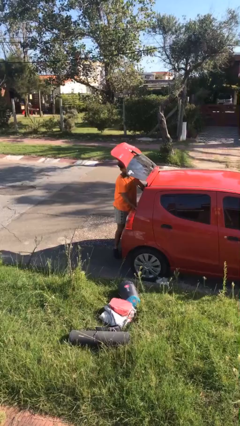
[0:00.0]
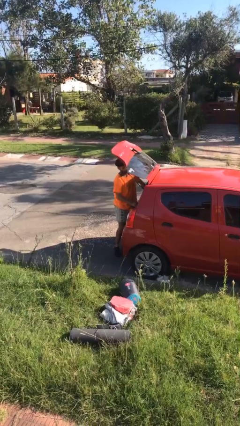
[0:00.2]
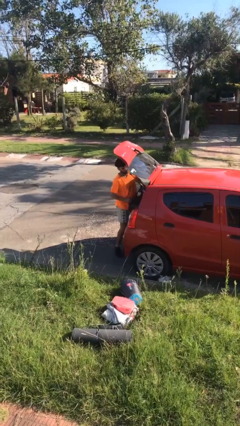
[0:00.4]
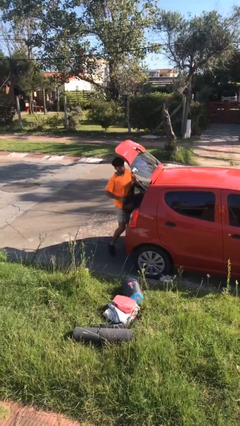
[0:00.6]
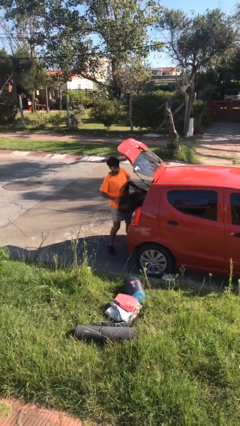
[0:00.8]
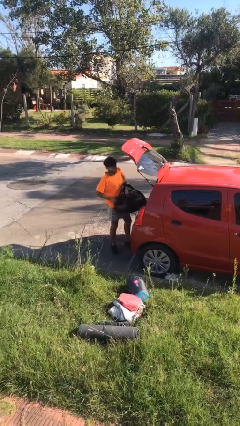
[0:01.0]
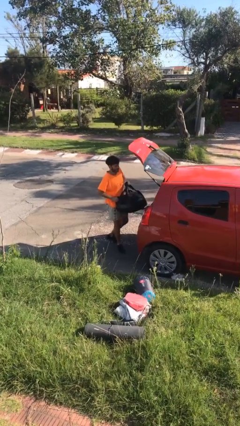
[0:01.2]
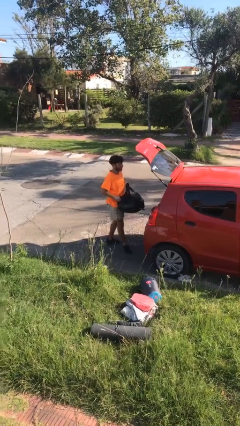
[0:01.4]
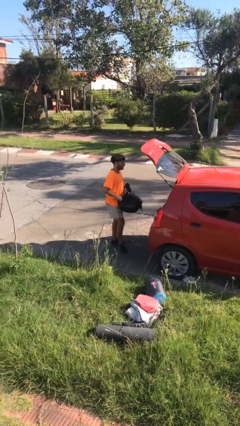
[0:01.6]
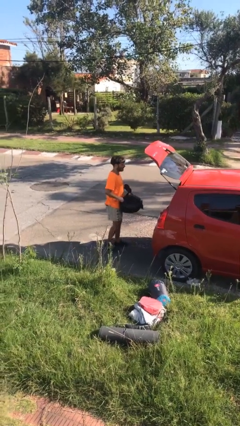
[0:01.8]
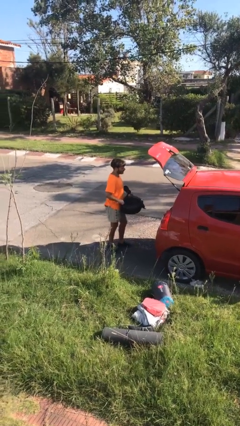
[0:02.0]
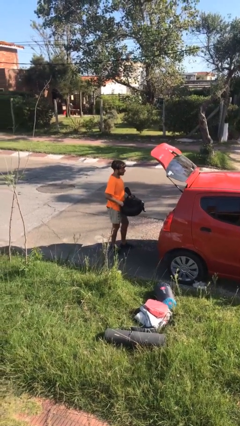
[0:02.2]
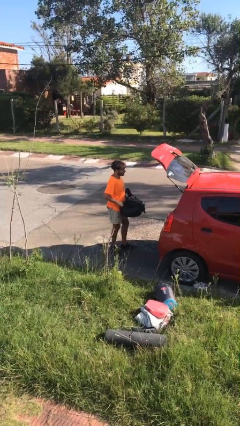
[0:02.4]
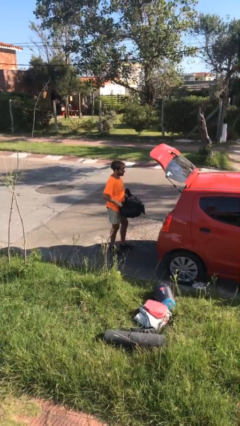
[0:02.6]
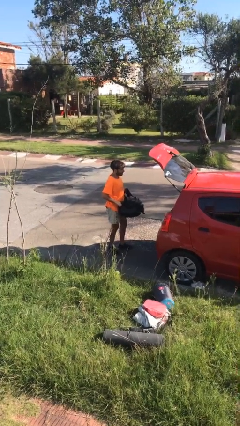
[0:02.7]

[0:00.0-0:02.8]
person unloads car

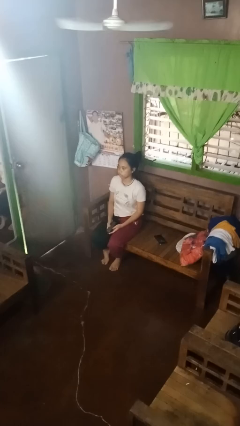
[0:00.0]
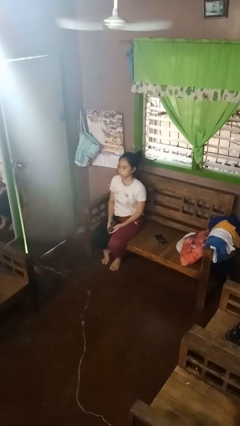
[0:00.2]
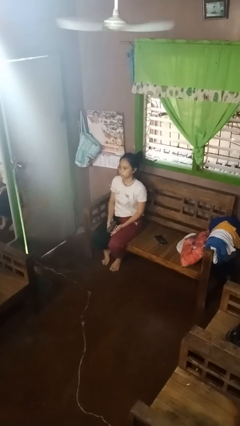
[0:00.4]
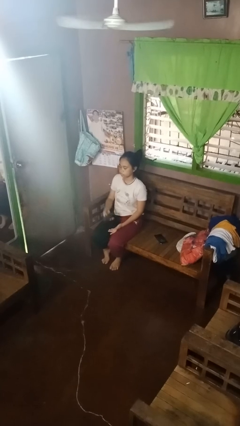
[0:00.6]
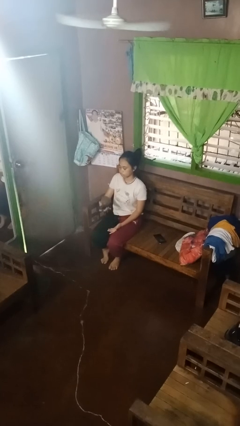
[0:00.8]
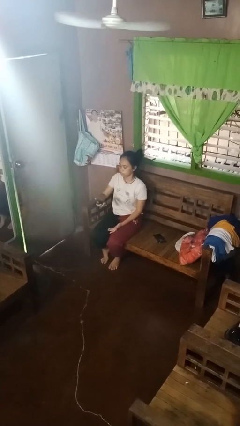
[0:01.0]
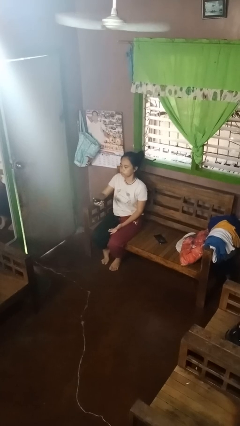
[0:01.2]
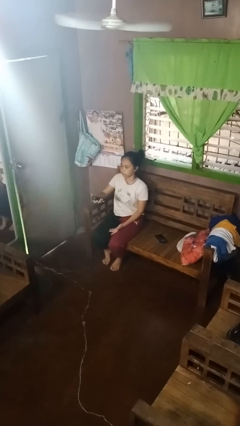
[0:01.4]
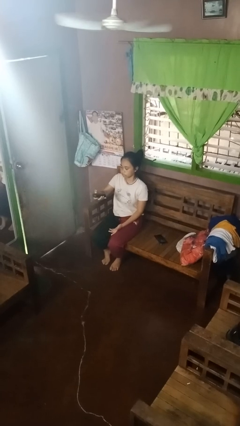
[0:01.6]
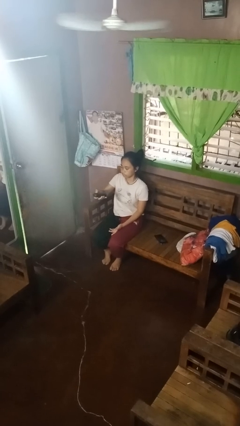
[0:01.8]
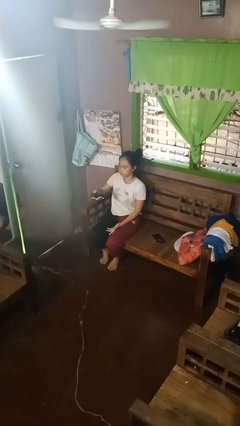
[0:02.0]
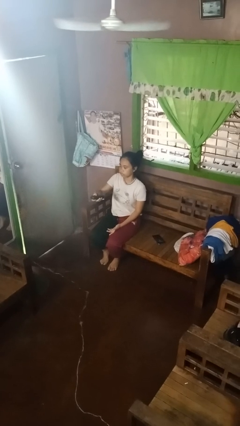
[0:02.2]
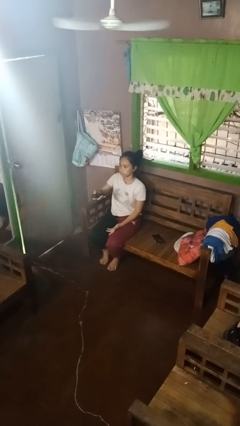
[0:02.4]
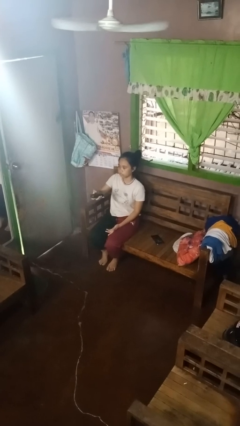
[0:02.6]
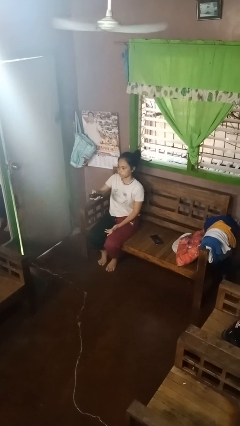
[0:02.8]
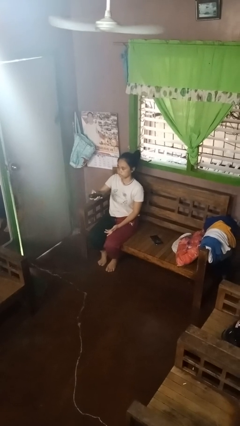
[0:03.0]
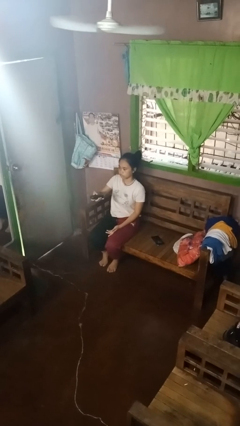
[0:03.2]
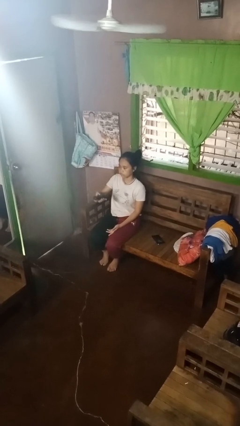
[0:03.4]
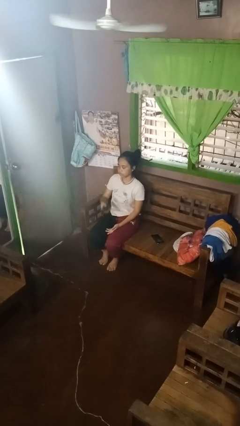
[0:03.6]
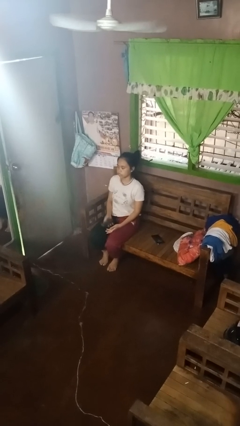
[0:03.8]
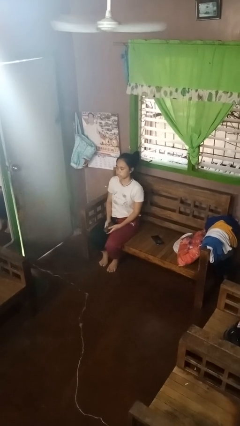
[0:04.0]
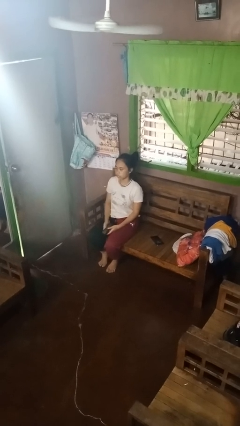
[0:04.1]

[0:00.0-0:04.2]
person uses television remote

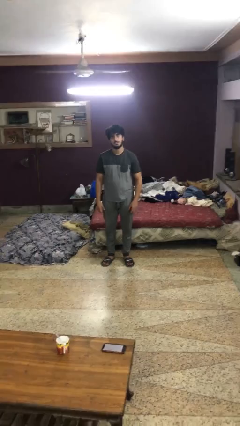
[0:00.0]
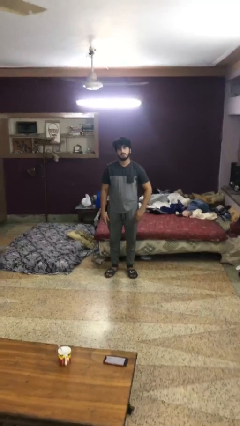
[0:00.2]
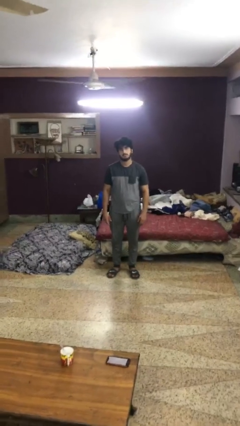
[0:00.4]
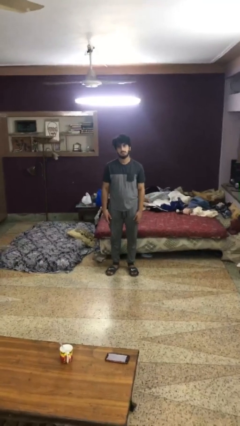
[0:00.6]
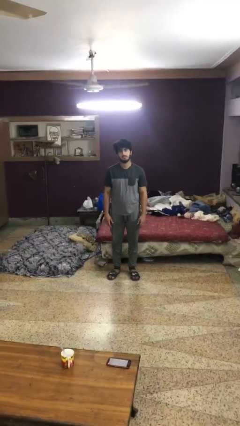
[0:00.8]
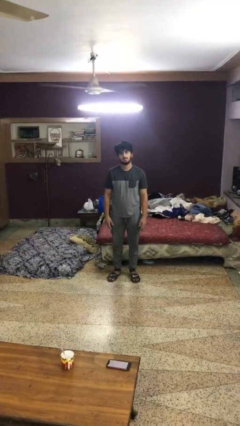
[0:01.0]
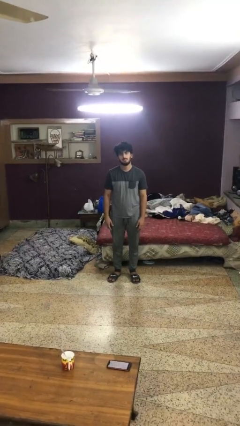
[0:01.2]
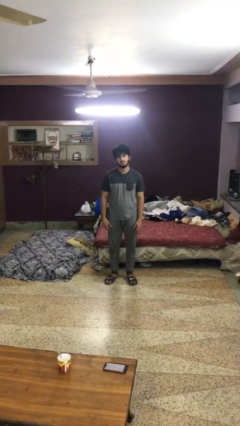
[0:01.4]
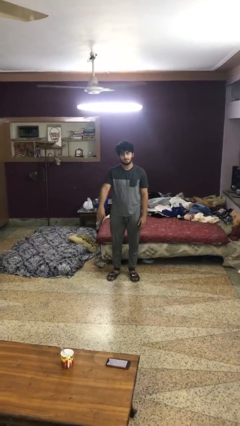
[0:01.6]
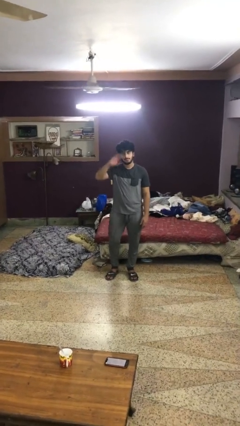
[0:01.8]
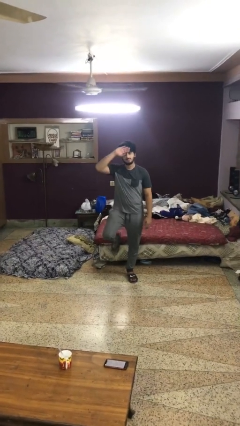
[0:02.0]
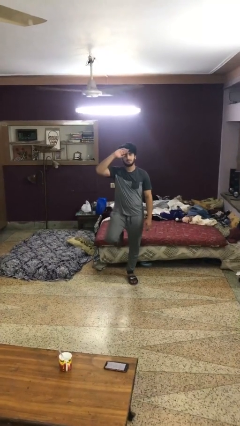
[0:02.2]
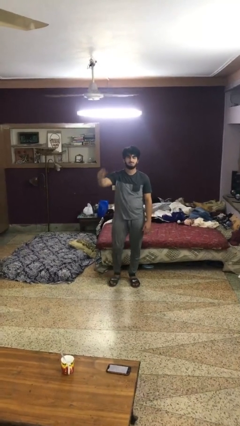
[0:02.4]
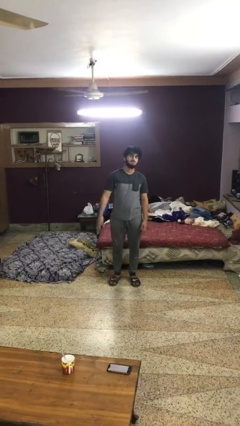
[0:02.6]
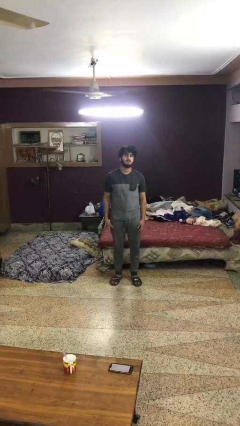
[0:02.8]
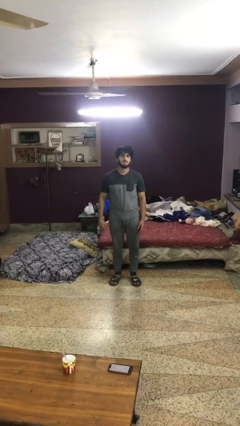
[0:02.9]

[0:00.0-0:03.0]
person salutes

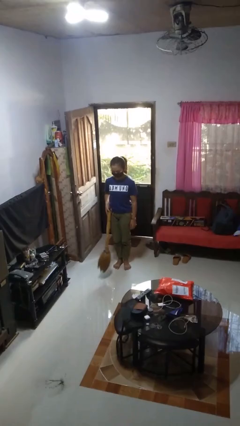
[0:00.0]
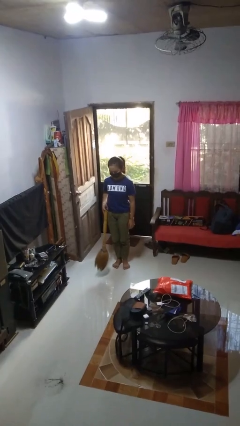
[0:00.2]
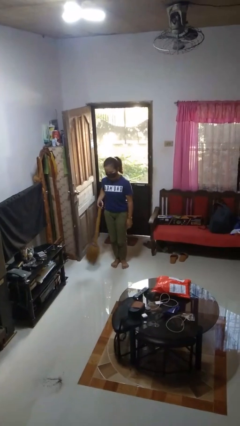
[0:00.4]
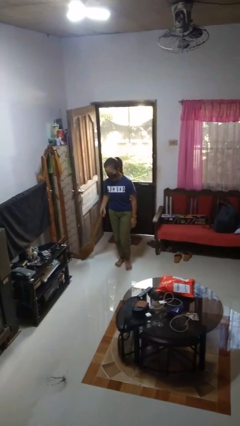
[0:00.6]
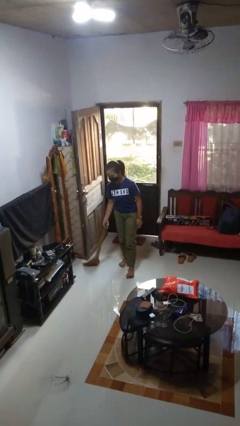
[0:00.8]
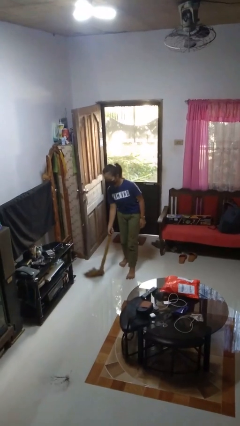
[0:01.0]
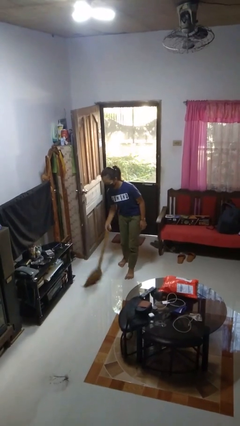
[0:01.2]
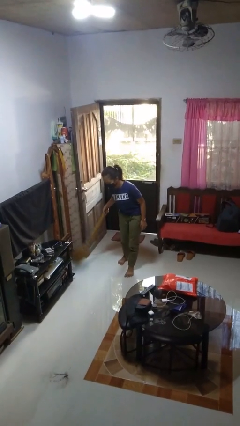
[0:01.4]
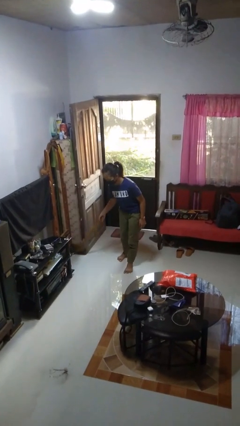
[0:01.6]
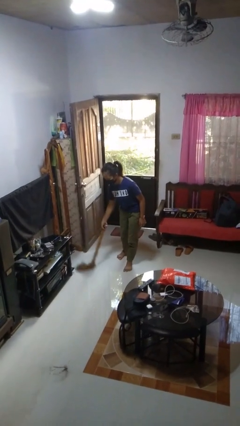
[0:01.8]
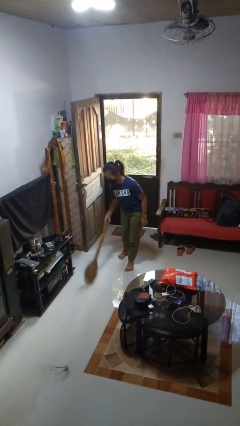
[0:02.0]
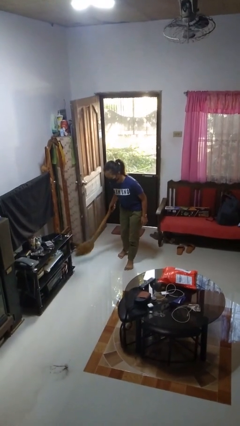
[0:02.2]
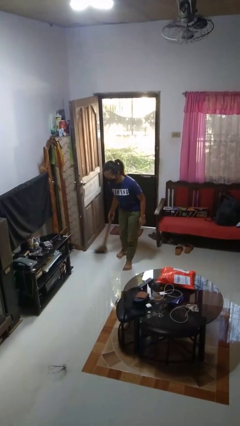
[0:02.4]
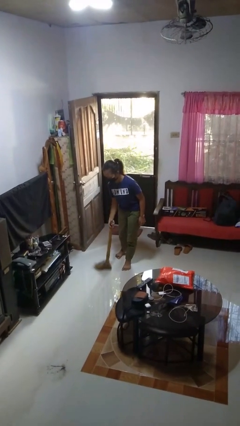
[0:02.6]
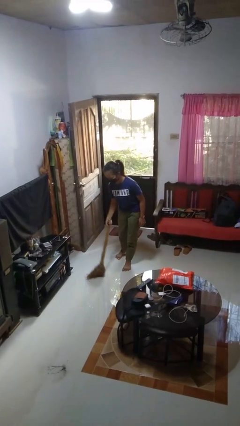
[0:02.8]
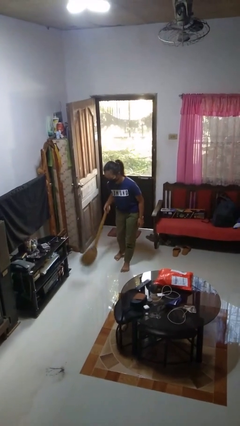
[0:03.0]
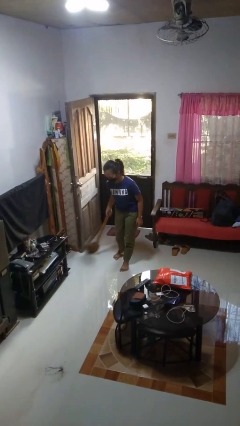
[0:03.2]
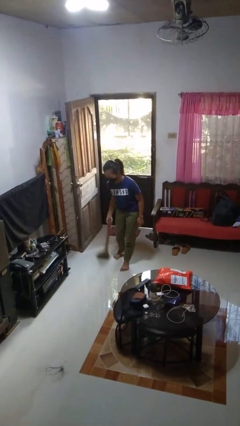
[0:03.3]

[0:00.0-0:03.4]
person sweeps floor

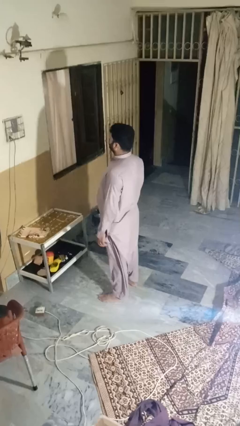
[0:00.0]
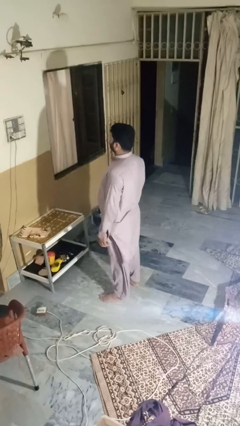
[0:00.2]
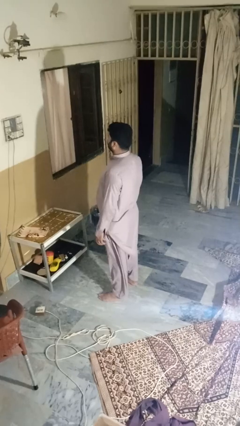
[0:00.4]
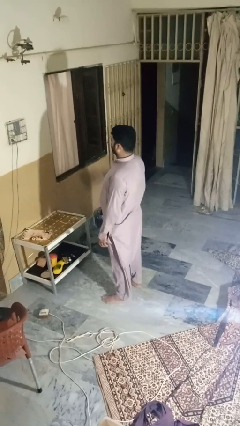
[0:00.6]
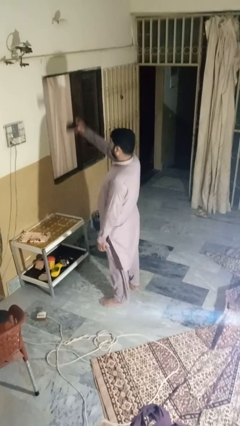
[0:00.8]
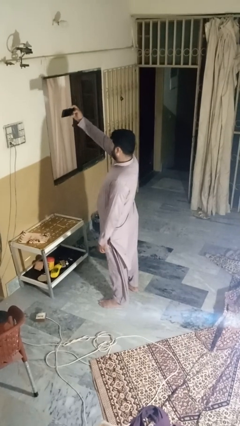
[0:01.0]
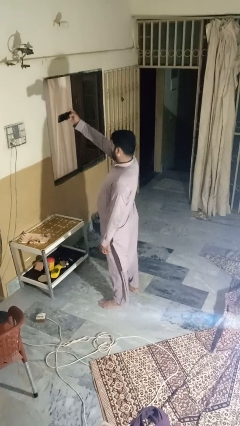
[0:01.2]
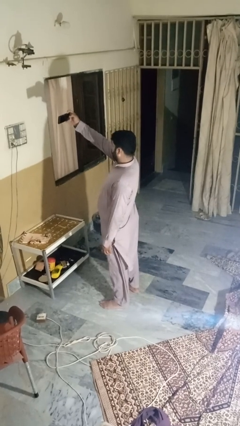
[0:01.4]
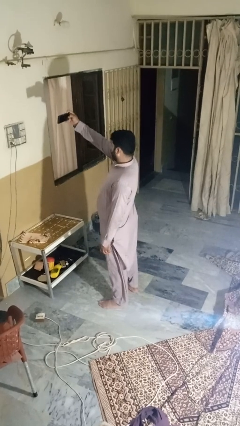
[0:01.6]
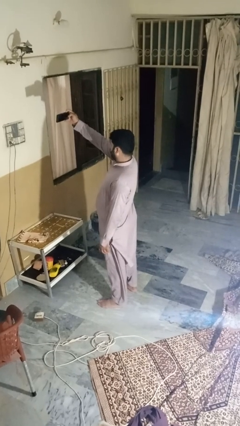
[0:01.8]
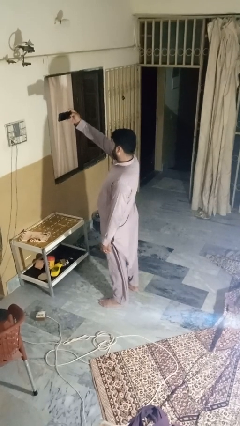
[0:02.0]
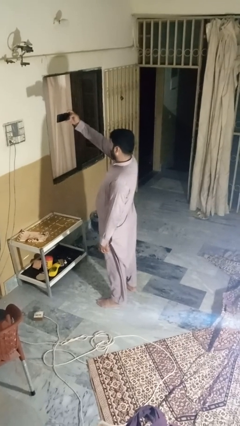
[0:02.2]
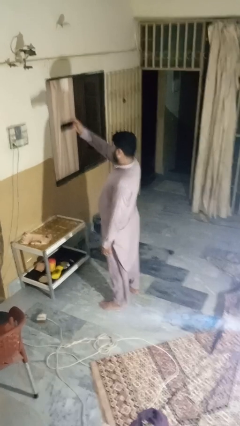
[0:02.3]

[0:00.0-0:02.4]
person takes selfie

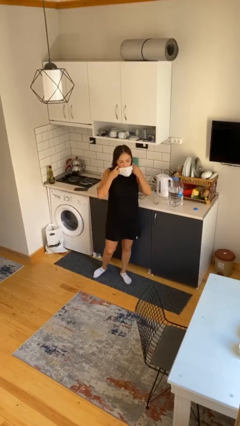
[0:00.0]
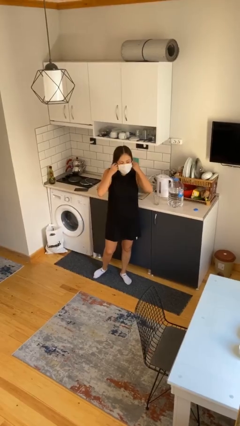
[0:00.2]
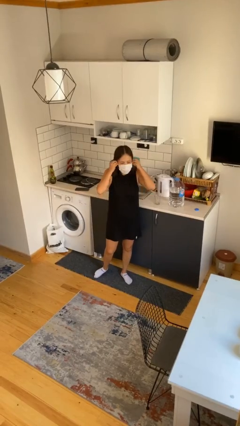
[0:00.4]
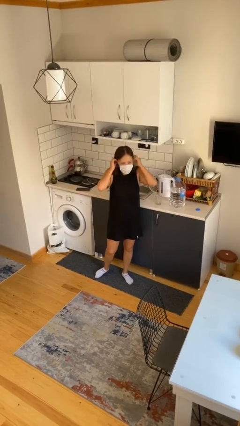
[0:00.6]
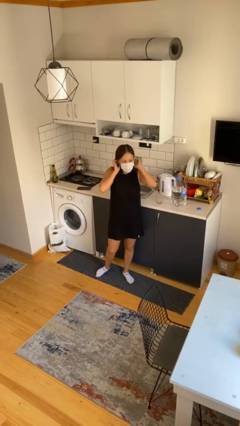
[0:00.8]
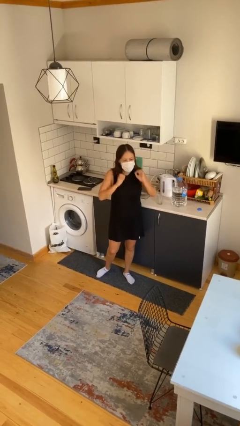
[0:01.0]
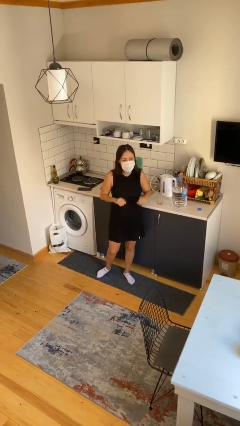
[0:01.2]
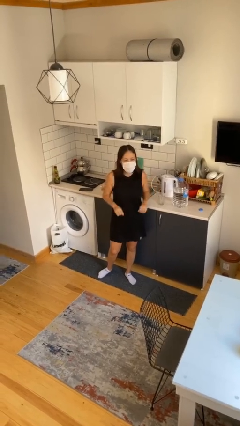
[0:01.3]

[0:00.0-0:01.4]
person puts on facemask
